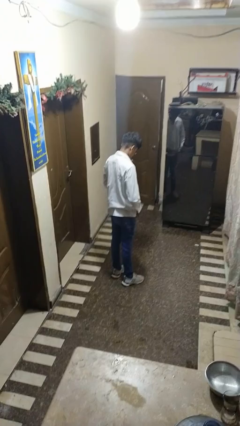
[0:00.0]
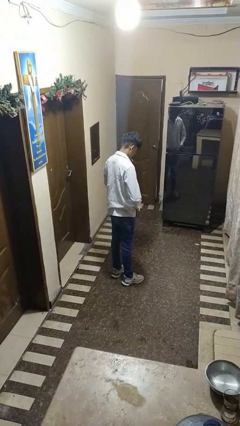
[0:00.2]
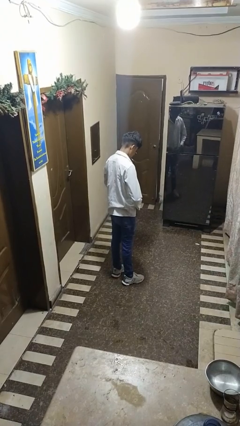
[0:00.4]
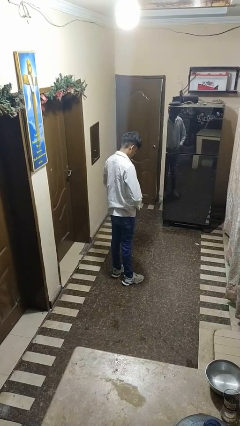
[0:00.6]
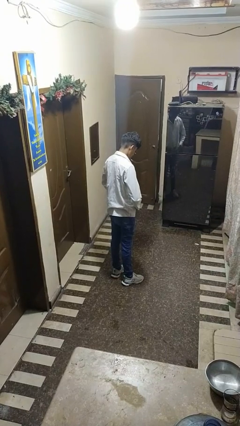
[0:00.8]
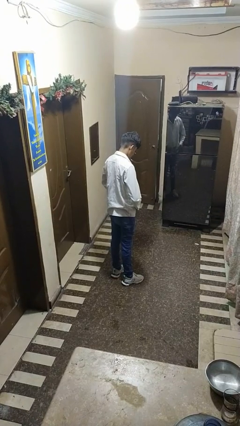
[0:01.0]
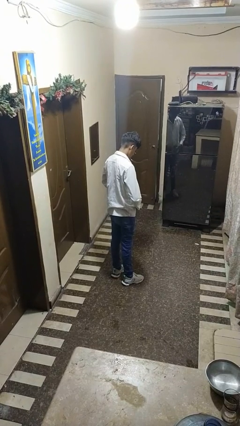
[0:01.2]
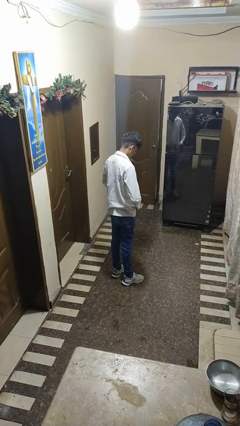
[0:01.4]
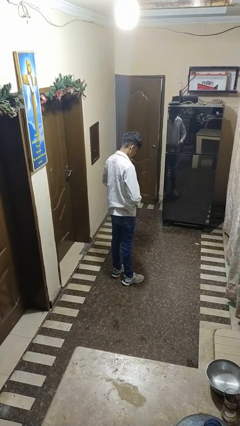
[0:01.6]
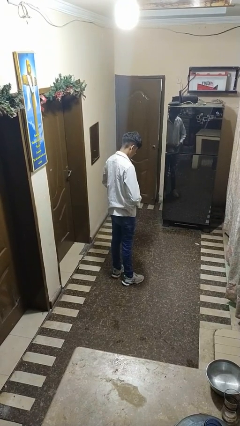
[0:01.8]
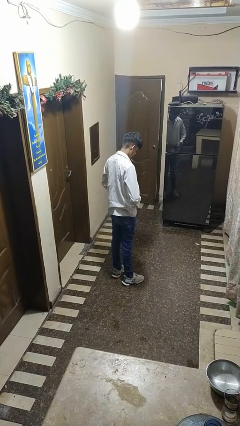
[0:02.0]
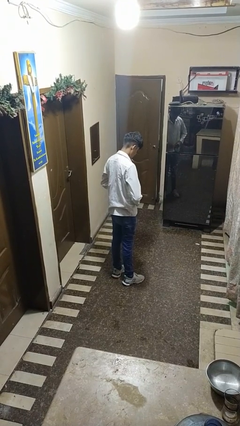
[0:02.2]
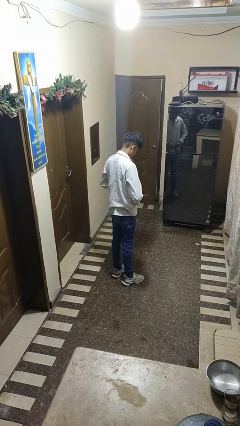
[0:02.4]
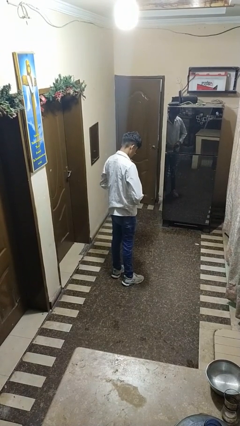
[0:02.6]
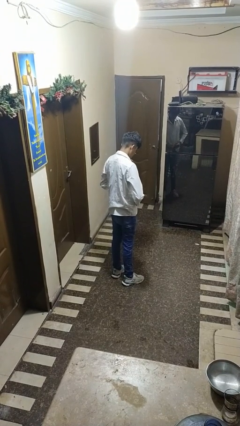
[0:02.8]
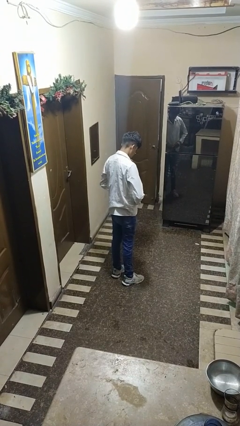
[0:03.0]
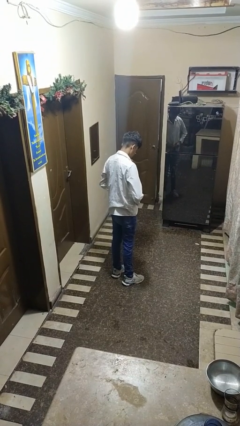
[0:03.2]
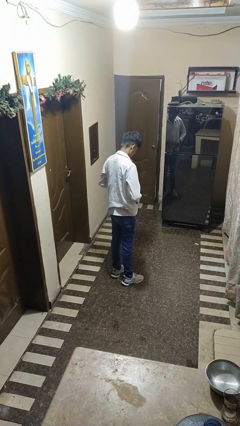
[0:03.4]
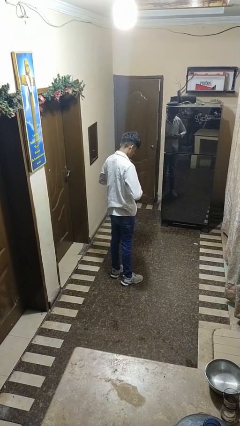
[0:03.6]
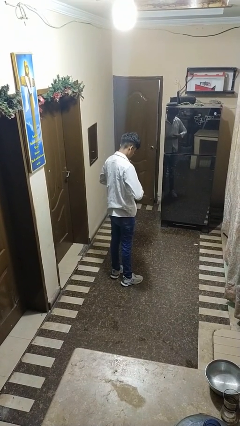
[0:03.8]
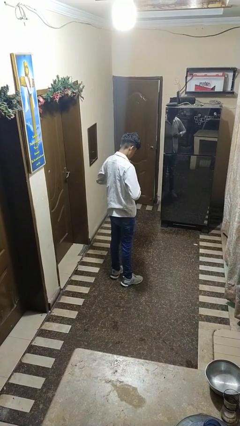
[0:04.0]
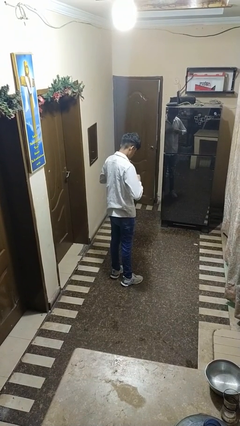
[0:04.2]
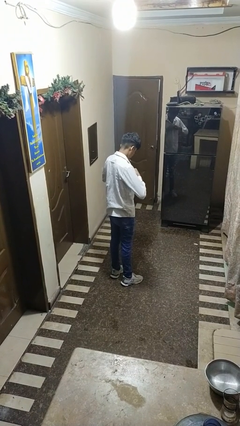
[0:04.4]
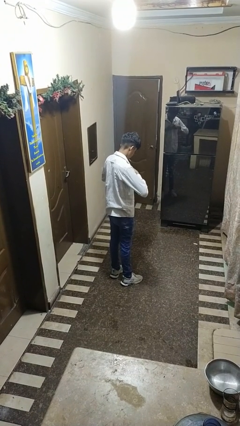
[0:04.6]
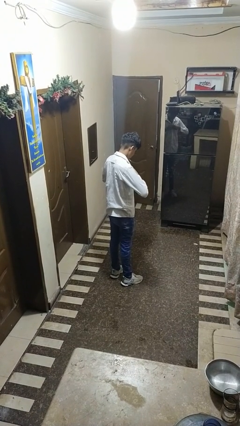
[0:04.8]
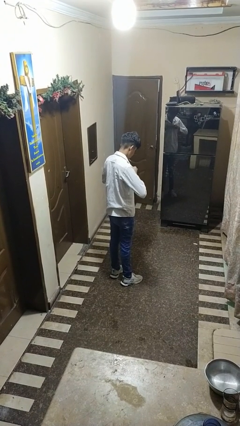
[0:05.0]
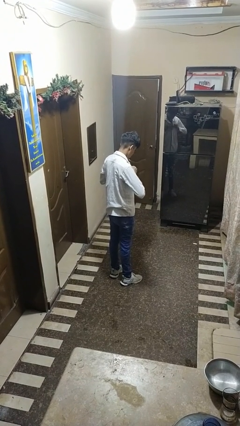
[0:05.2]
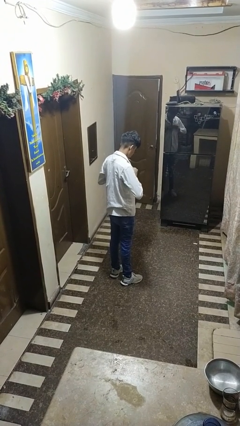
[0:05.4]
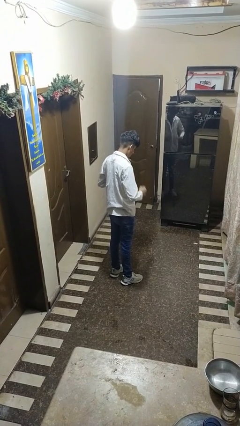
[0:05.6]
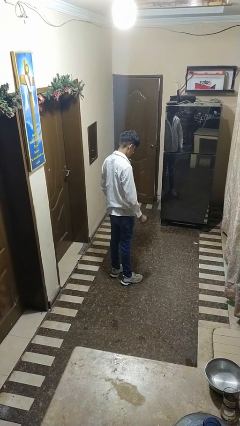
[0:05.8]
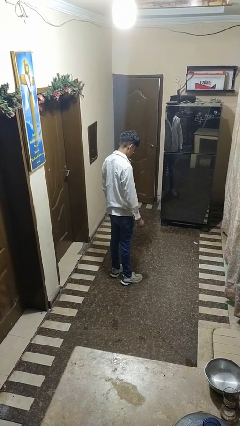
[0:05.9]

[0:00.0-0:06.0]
person unbuttons shirt

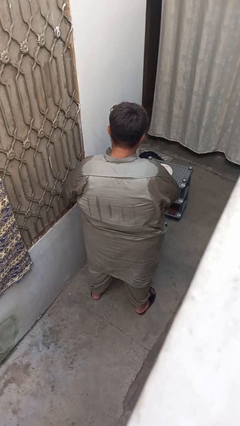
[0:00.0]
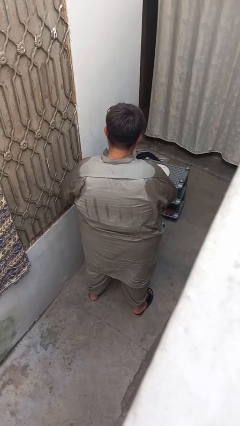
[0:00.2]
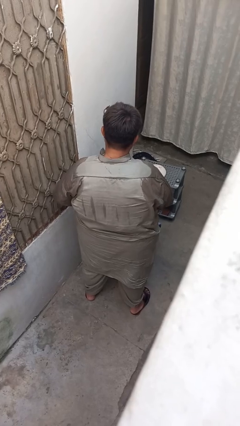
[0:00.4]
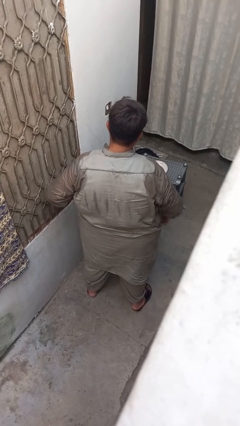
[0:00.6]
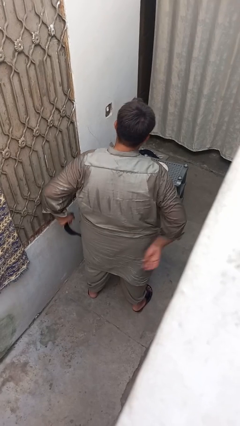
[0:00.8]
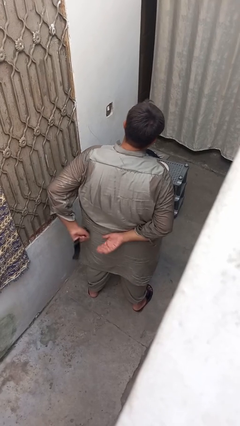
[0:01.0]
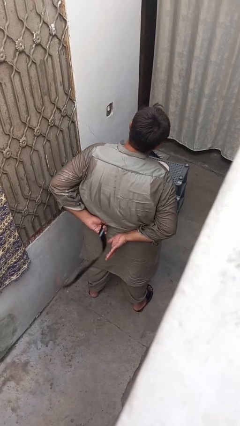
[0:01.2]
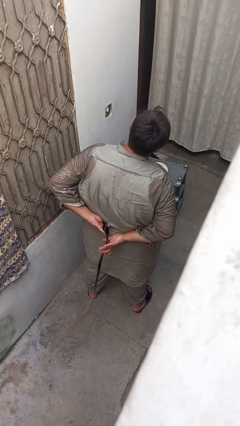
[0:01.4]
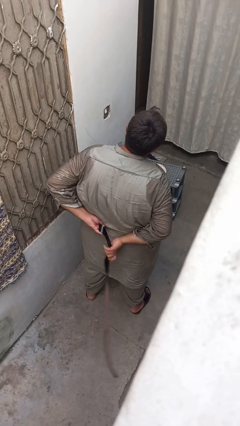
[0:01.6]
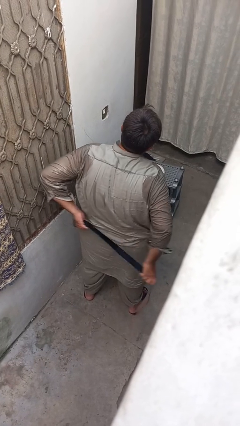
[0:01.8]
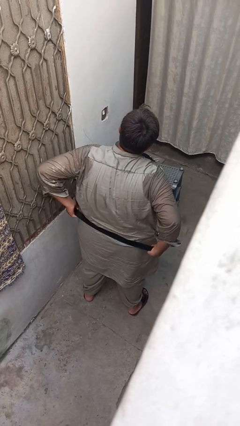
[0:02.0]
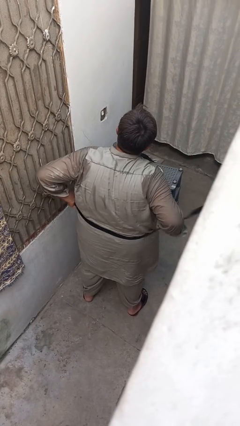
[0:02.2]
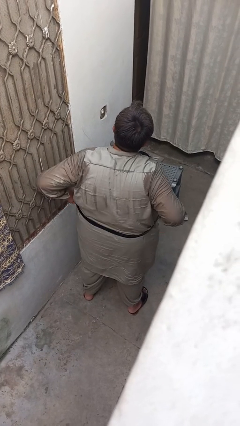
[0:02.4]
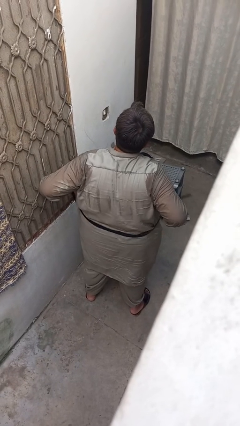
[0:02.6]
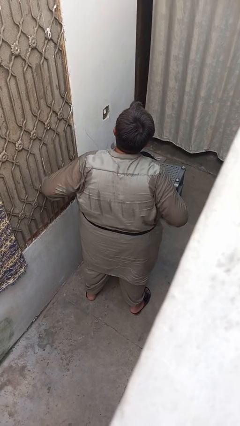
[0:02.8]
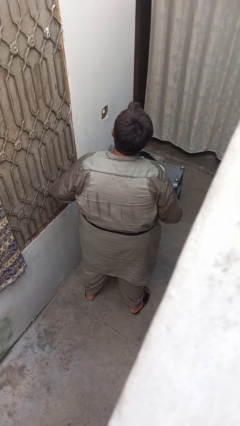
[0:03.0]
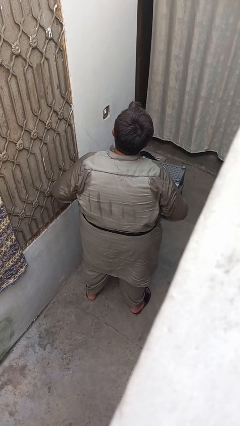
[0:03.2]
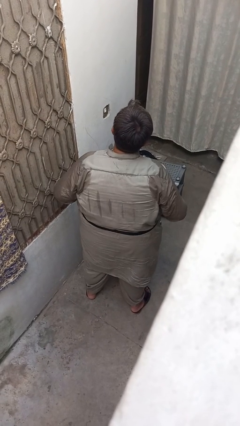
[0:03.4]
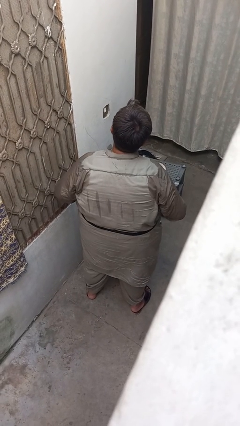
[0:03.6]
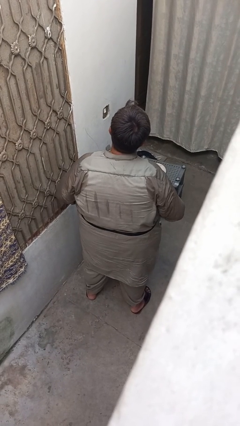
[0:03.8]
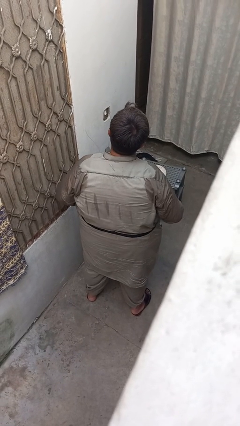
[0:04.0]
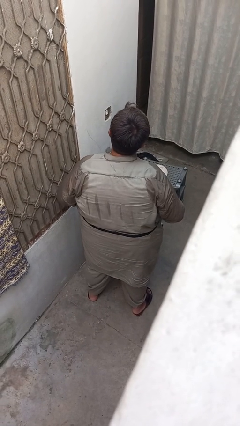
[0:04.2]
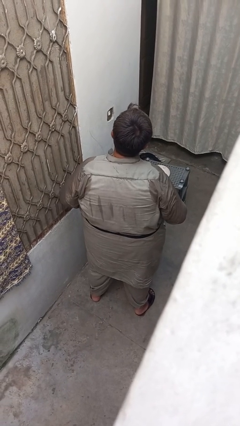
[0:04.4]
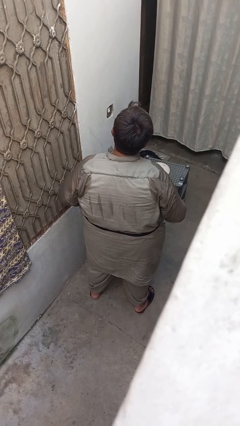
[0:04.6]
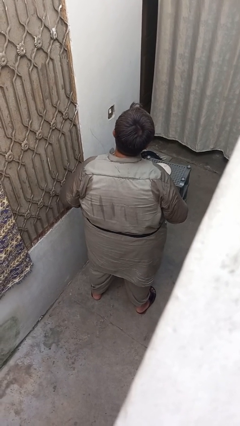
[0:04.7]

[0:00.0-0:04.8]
person puts on belt

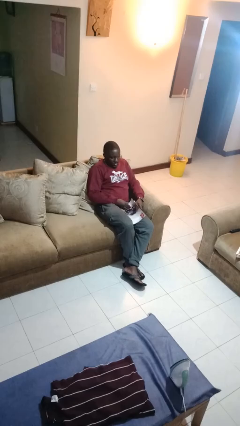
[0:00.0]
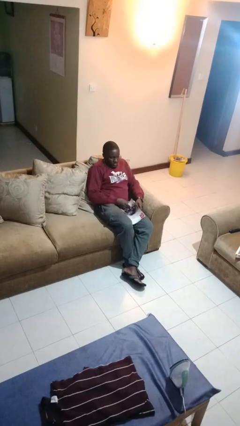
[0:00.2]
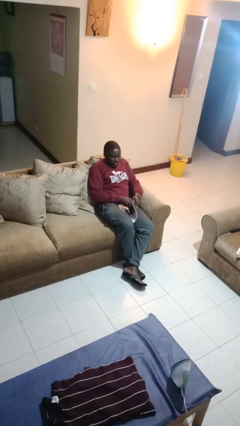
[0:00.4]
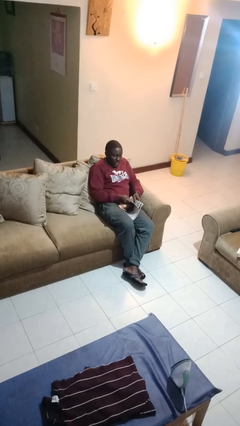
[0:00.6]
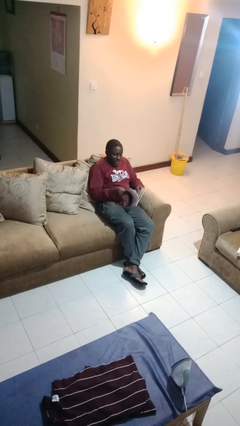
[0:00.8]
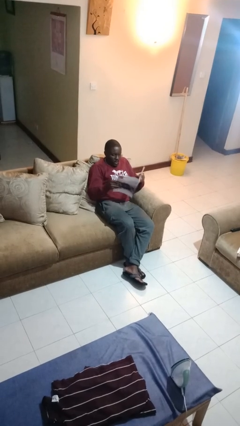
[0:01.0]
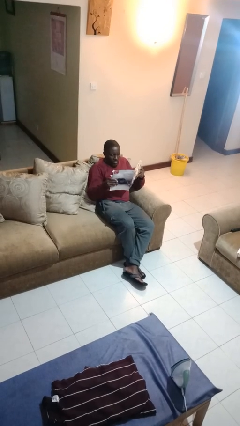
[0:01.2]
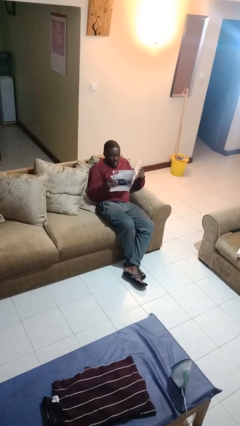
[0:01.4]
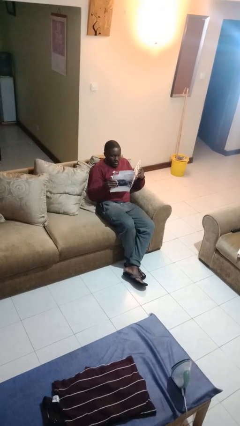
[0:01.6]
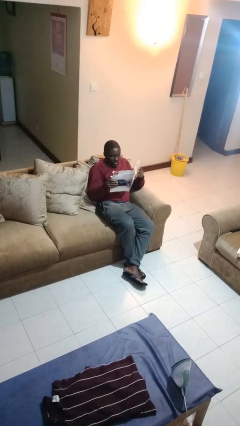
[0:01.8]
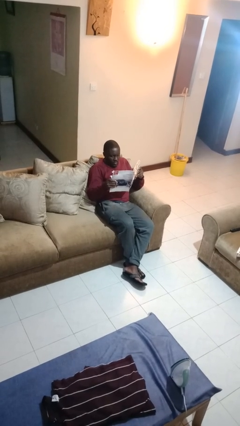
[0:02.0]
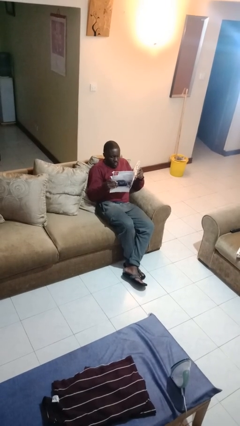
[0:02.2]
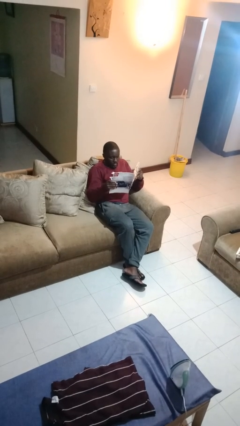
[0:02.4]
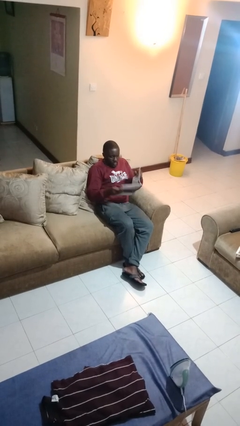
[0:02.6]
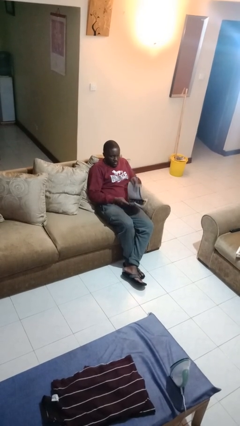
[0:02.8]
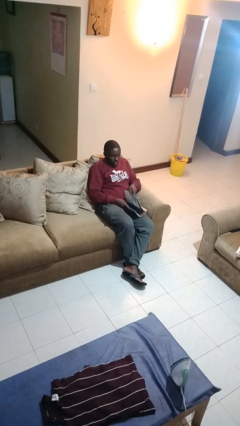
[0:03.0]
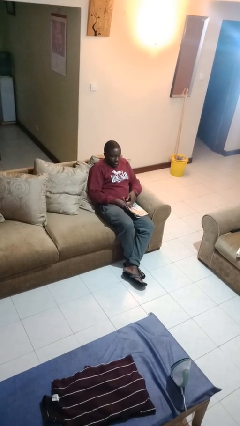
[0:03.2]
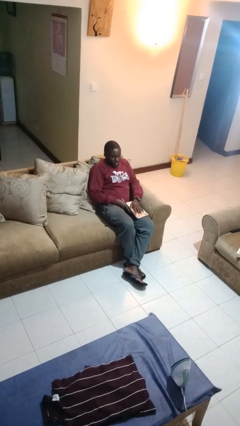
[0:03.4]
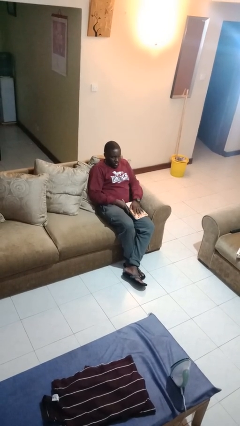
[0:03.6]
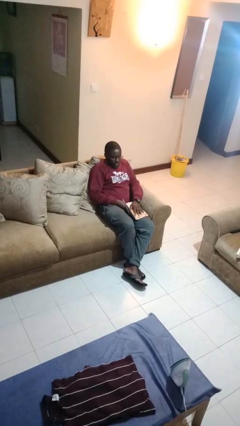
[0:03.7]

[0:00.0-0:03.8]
person reads magazine

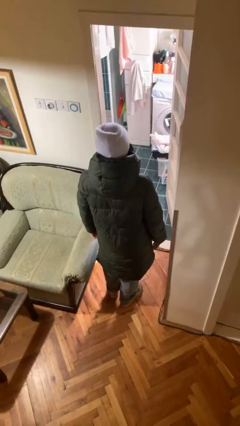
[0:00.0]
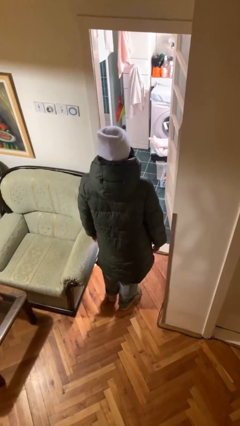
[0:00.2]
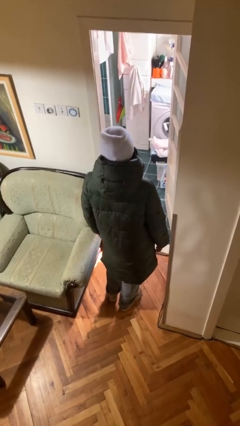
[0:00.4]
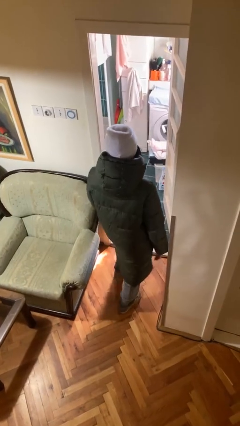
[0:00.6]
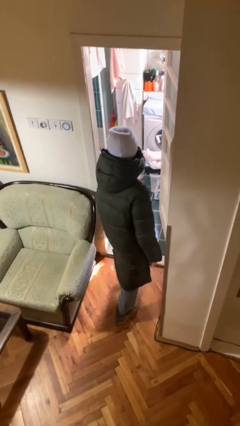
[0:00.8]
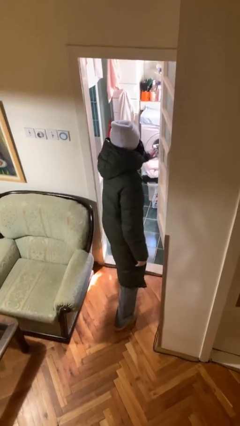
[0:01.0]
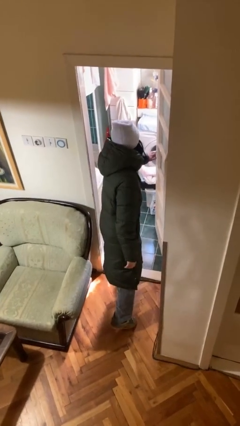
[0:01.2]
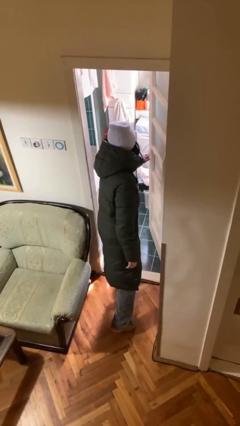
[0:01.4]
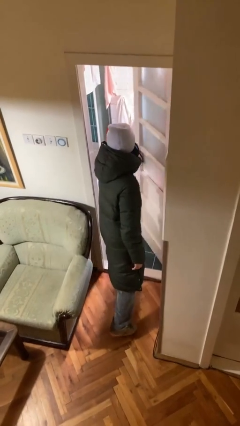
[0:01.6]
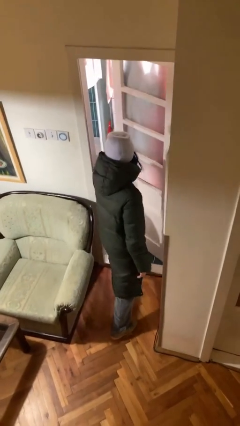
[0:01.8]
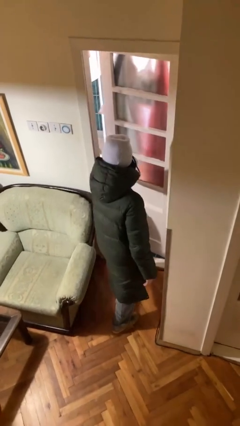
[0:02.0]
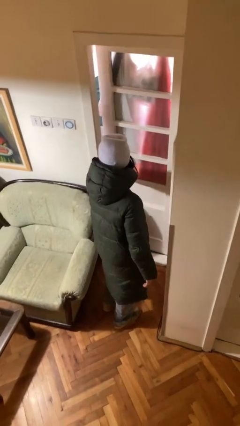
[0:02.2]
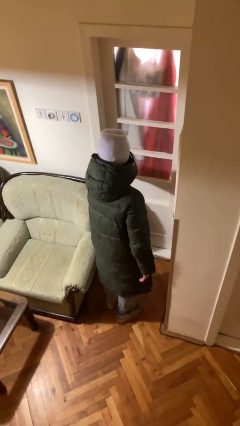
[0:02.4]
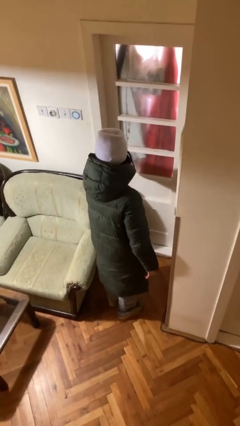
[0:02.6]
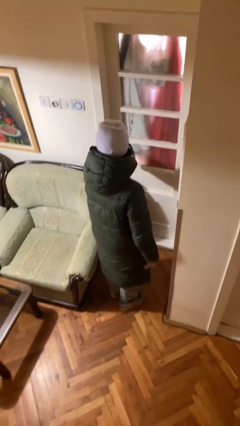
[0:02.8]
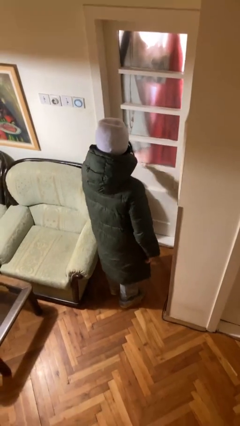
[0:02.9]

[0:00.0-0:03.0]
person closes facility door

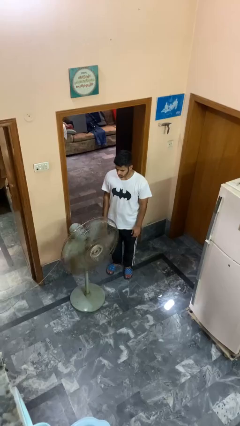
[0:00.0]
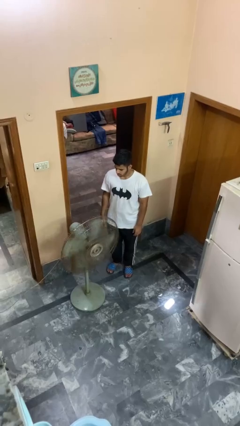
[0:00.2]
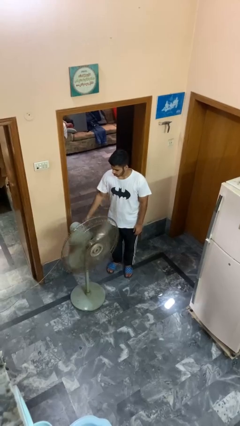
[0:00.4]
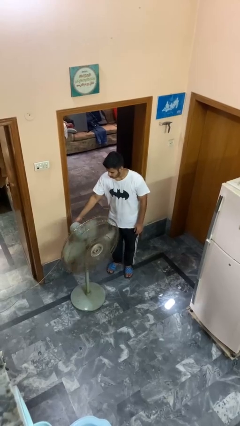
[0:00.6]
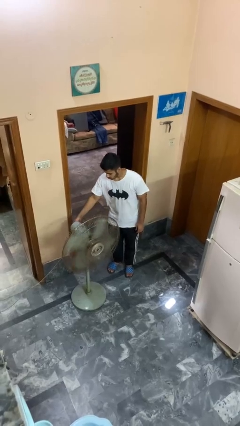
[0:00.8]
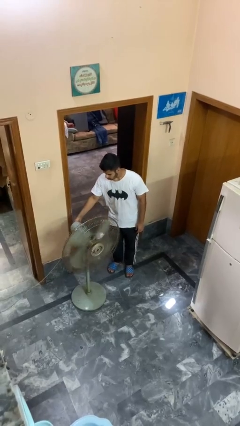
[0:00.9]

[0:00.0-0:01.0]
person turns on fan
